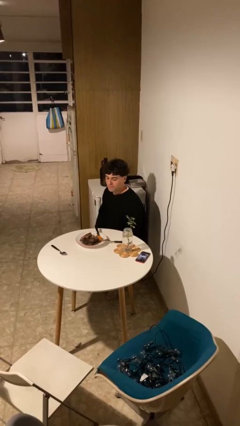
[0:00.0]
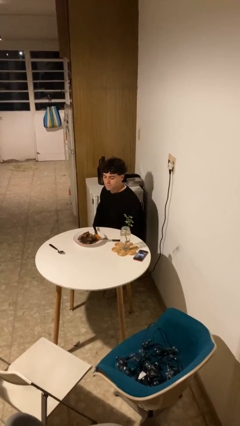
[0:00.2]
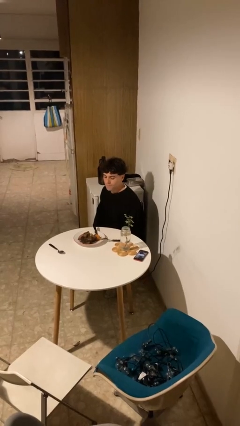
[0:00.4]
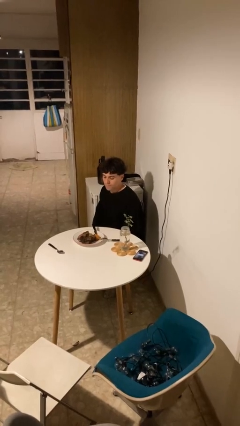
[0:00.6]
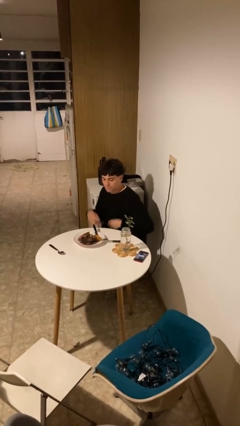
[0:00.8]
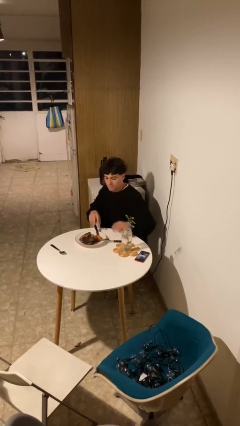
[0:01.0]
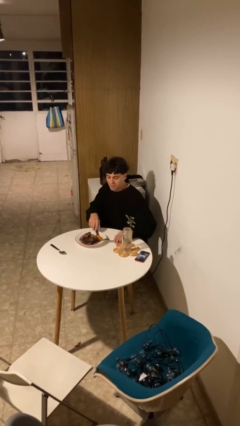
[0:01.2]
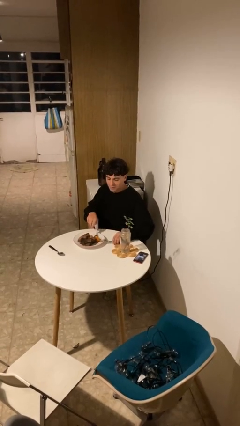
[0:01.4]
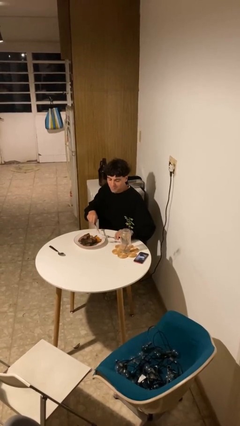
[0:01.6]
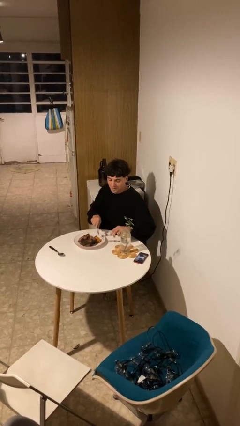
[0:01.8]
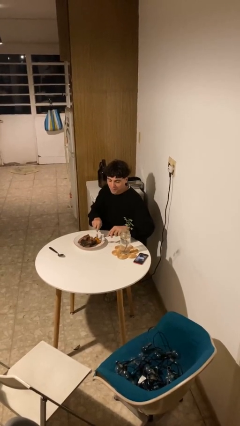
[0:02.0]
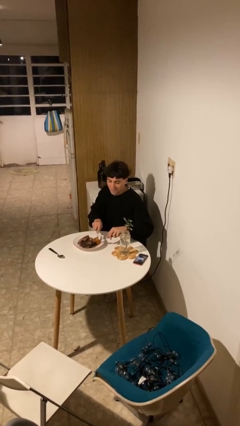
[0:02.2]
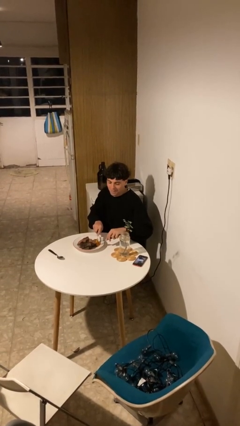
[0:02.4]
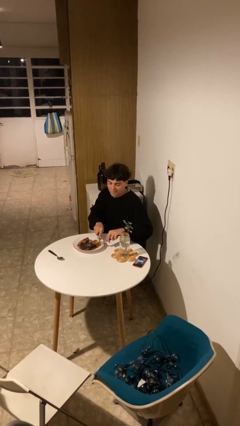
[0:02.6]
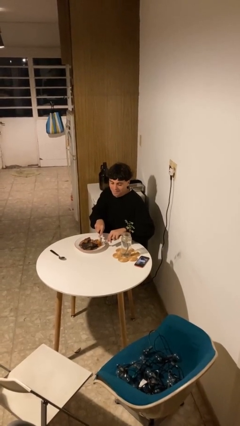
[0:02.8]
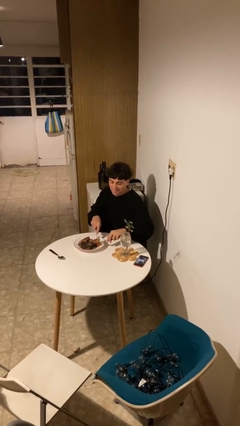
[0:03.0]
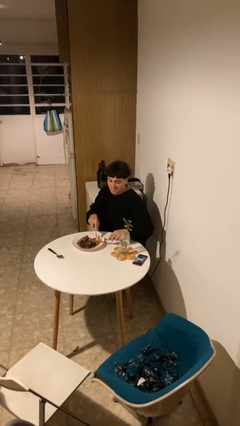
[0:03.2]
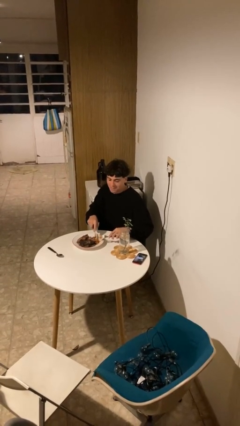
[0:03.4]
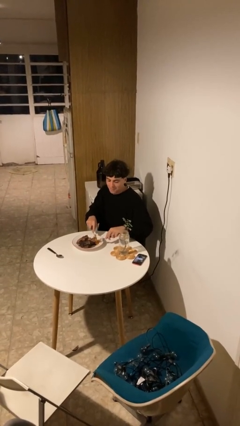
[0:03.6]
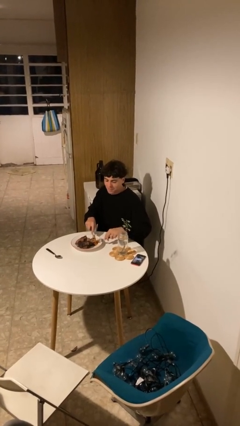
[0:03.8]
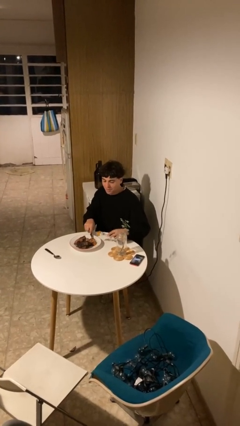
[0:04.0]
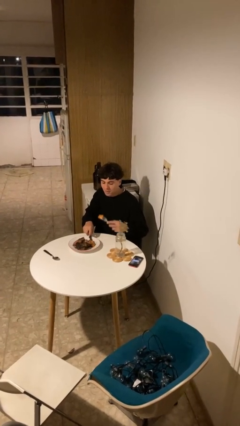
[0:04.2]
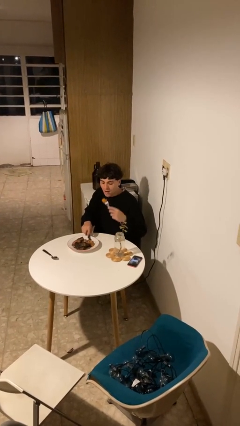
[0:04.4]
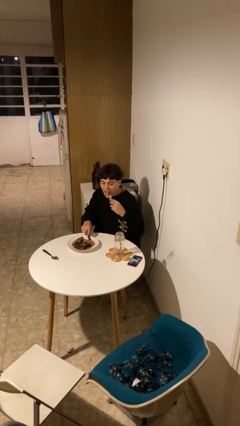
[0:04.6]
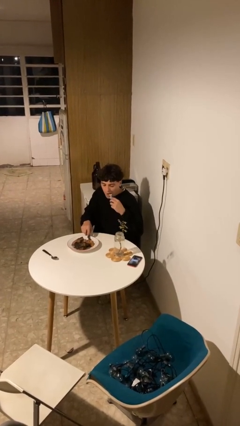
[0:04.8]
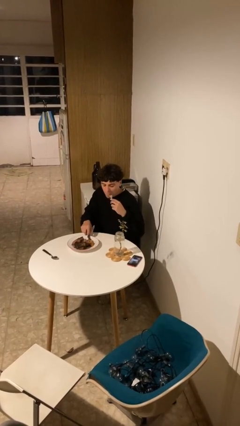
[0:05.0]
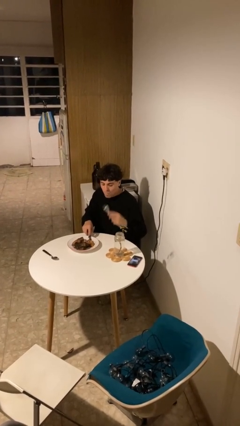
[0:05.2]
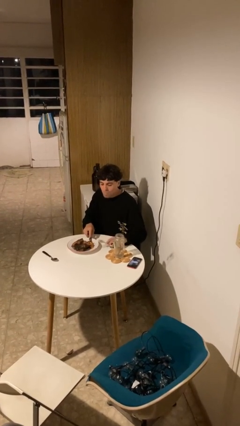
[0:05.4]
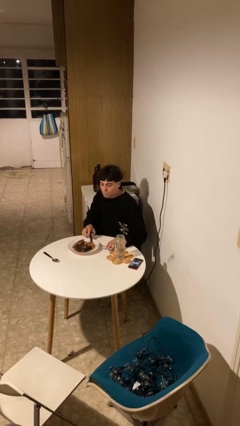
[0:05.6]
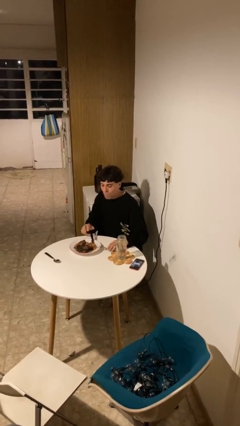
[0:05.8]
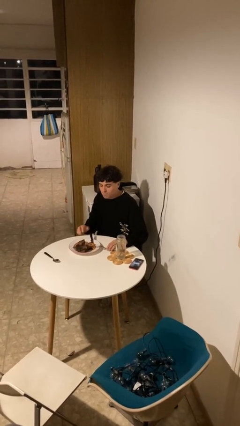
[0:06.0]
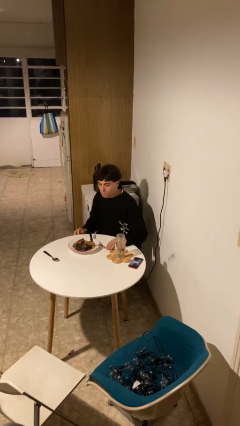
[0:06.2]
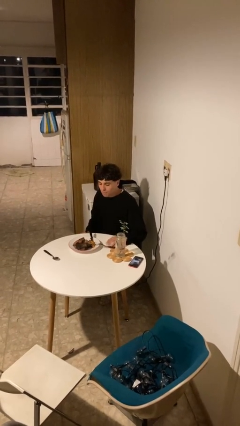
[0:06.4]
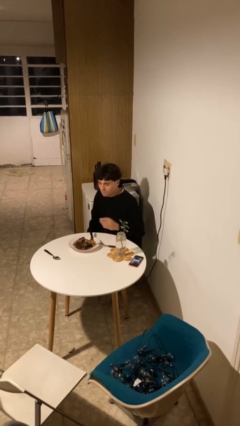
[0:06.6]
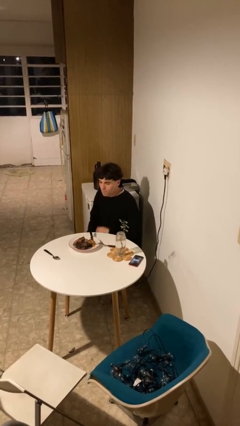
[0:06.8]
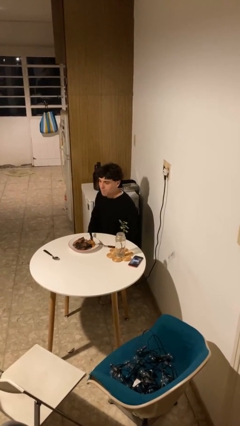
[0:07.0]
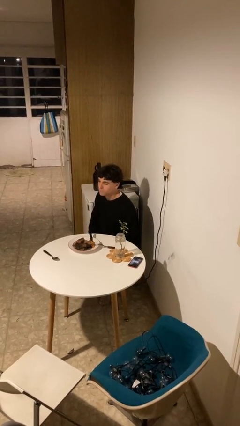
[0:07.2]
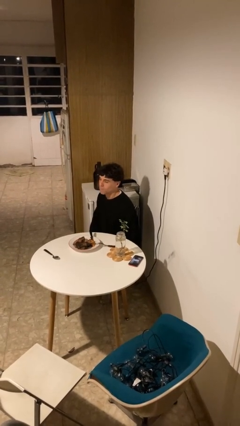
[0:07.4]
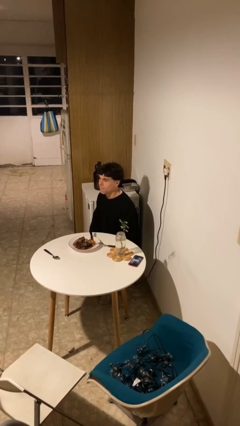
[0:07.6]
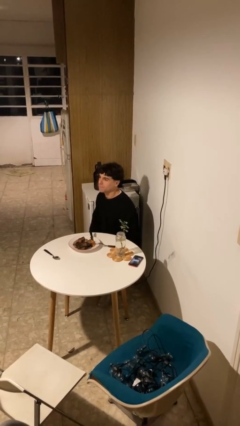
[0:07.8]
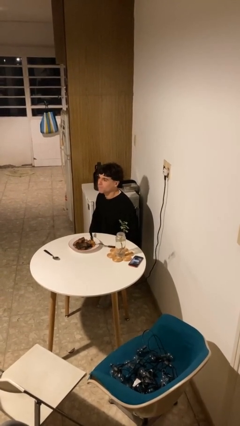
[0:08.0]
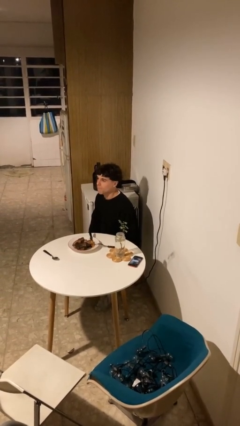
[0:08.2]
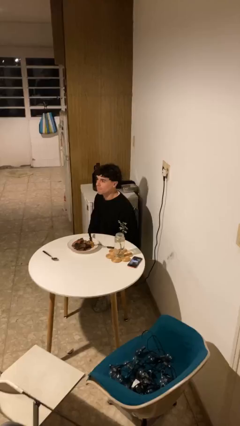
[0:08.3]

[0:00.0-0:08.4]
person eats with utensil

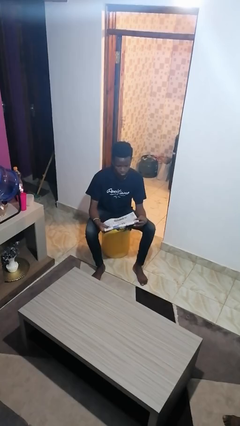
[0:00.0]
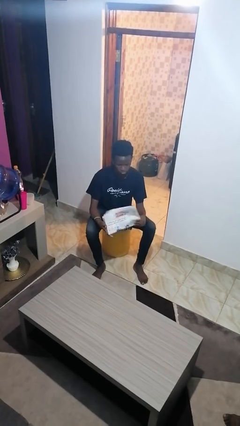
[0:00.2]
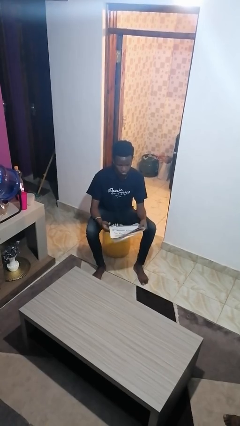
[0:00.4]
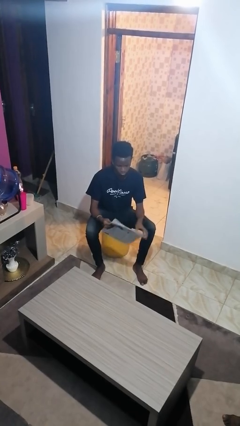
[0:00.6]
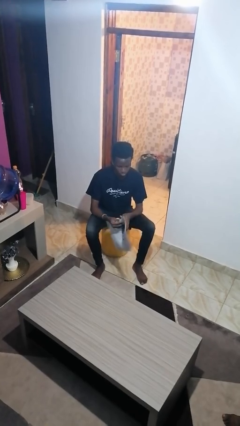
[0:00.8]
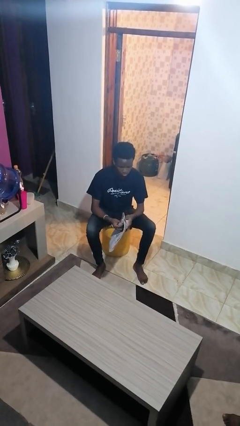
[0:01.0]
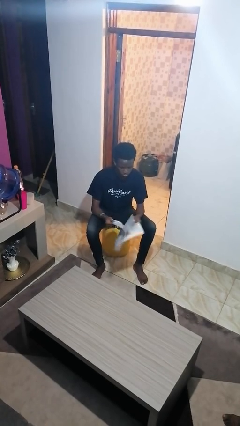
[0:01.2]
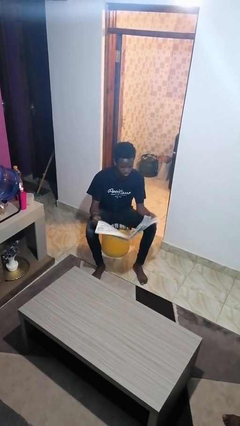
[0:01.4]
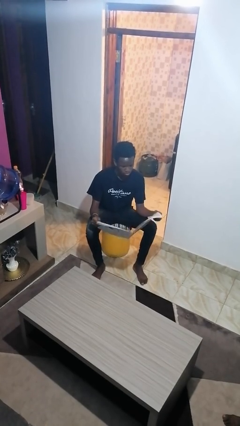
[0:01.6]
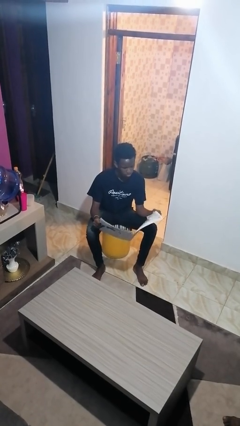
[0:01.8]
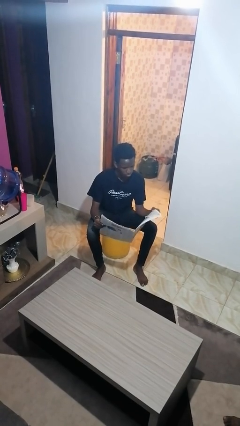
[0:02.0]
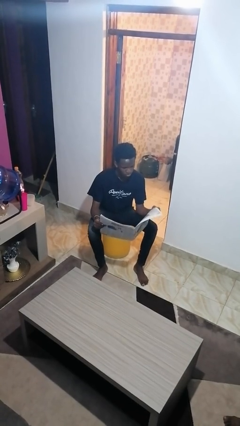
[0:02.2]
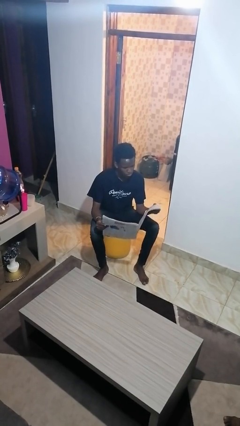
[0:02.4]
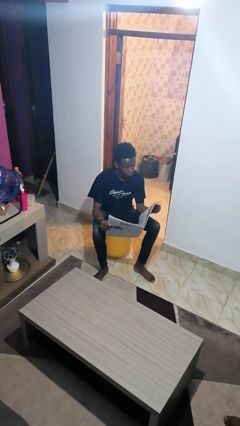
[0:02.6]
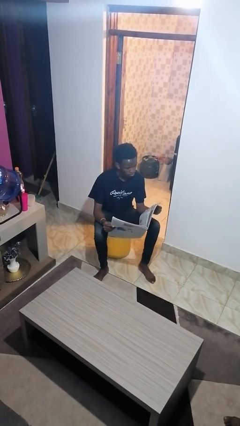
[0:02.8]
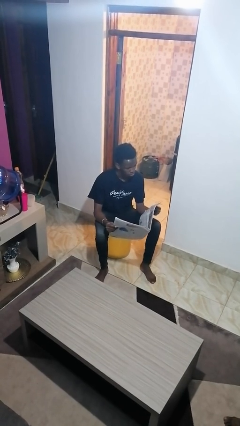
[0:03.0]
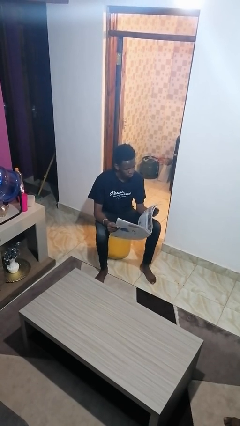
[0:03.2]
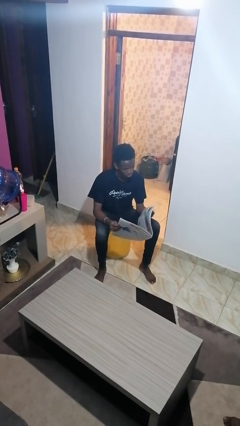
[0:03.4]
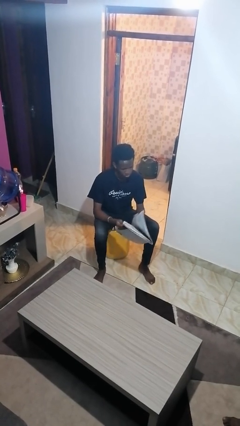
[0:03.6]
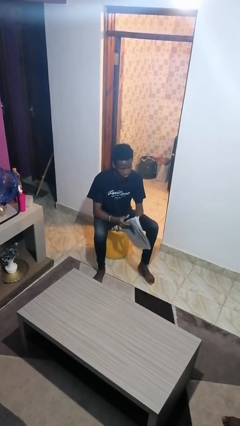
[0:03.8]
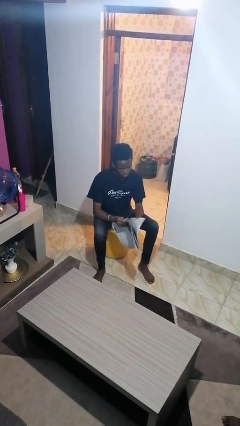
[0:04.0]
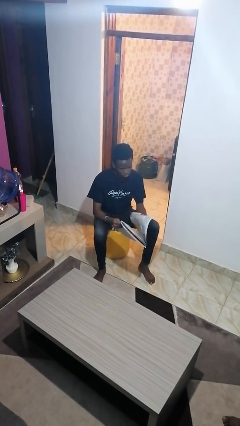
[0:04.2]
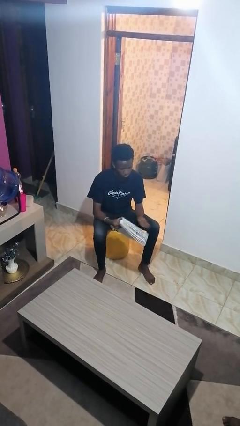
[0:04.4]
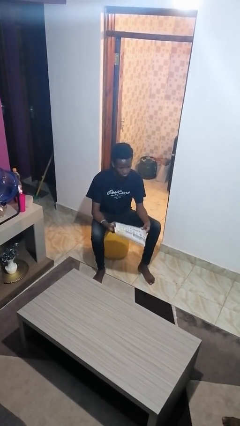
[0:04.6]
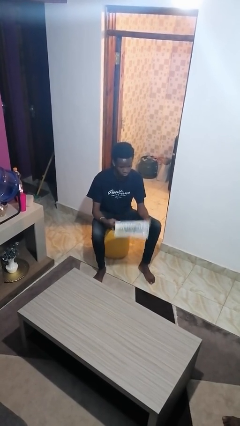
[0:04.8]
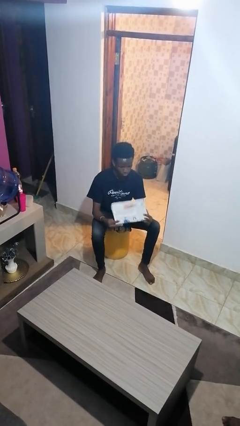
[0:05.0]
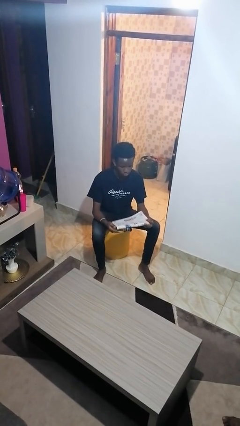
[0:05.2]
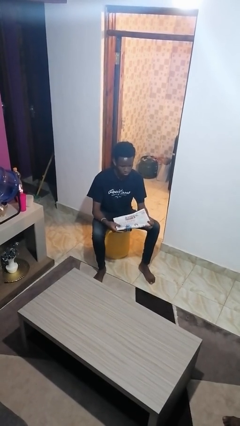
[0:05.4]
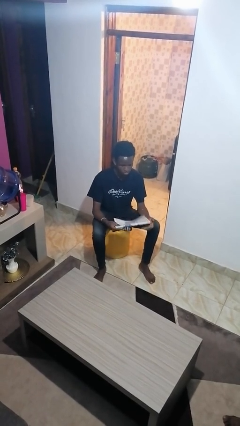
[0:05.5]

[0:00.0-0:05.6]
person reads newspaper

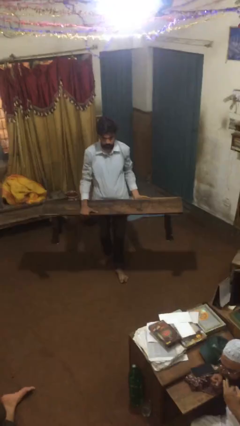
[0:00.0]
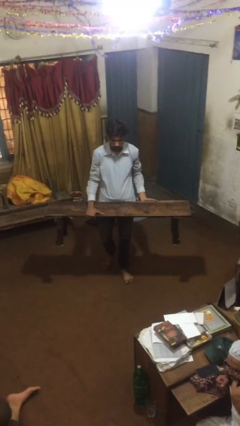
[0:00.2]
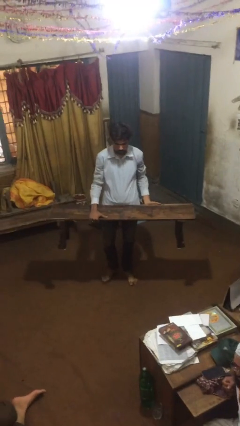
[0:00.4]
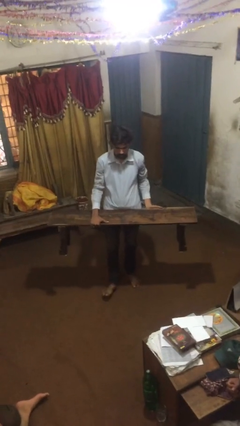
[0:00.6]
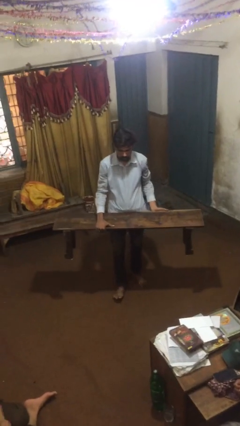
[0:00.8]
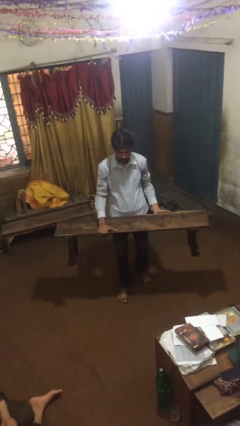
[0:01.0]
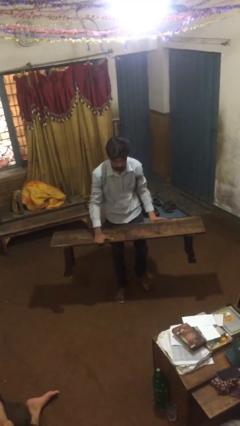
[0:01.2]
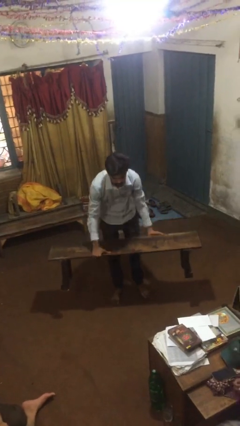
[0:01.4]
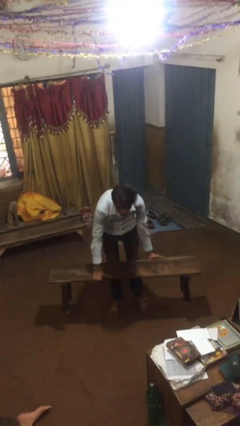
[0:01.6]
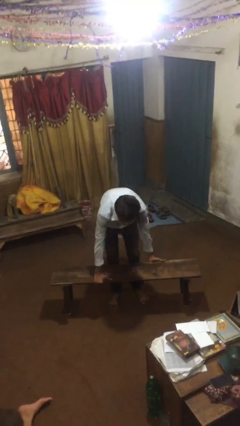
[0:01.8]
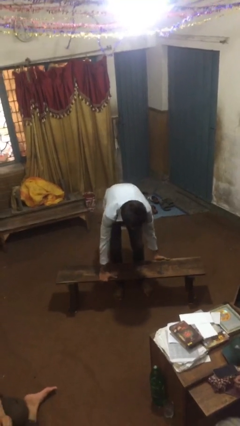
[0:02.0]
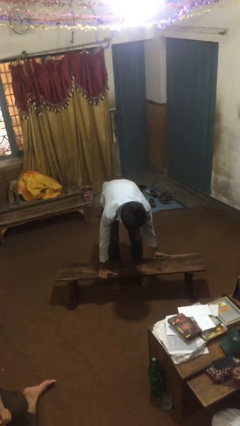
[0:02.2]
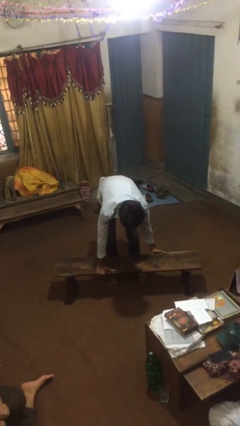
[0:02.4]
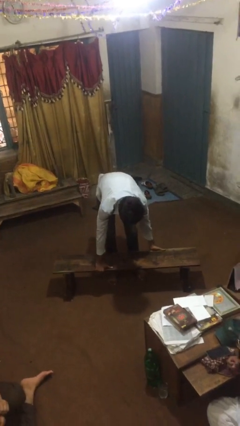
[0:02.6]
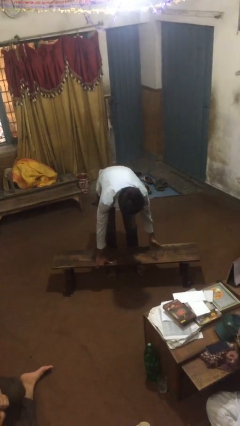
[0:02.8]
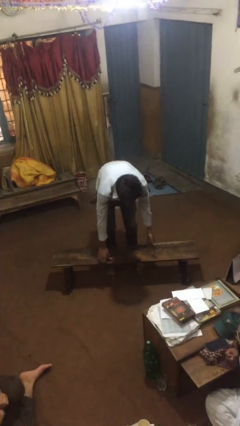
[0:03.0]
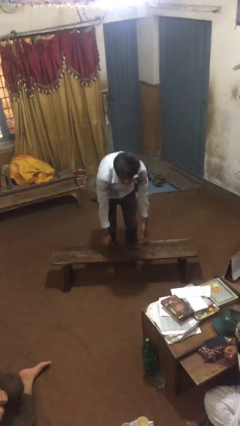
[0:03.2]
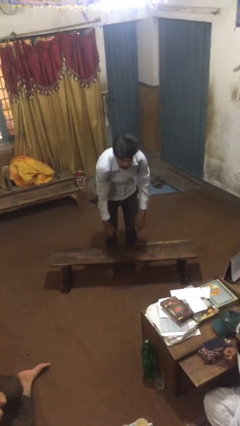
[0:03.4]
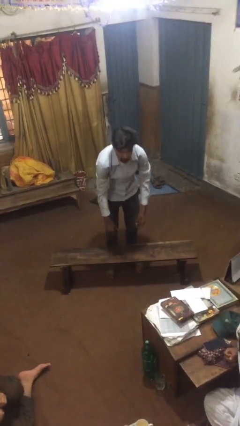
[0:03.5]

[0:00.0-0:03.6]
person puts down object on floor

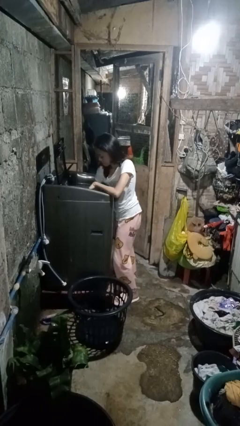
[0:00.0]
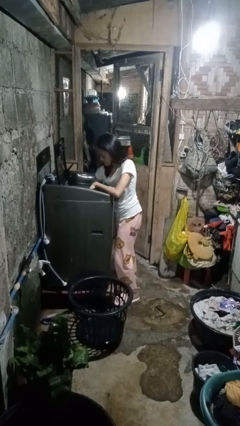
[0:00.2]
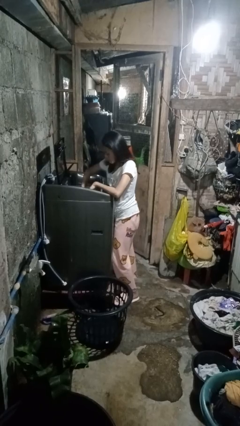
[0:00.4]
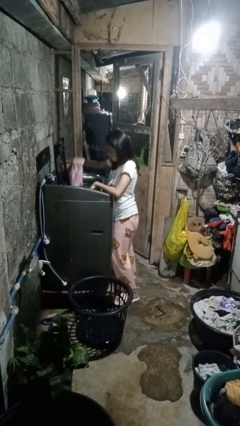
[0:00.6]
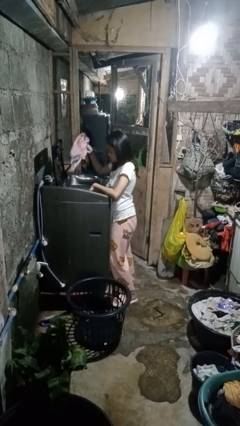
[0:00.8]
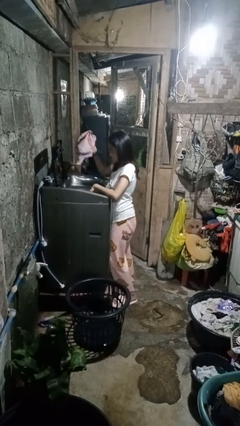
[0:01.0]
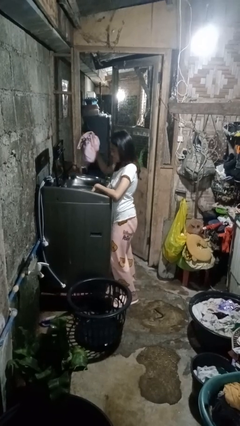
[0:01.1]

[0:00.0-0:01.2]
person unloads clotheswasher
